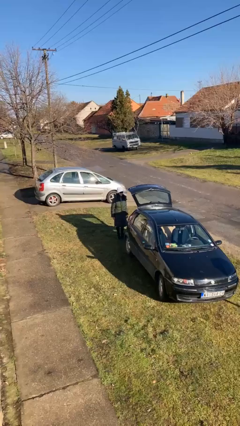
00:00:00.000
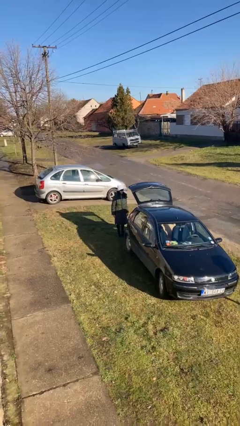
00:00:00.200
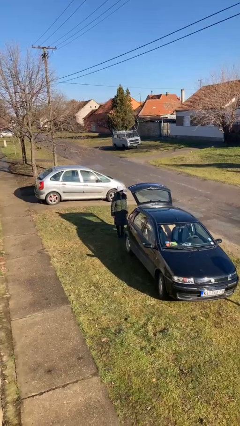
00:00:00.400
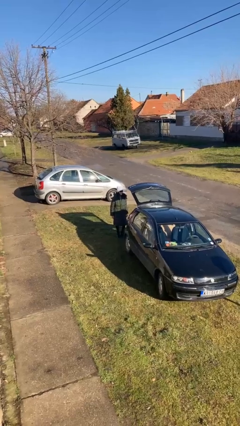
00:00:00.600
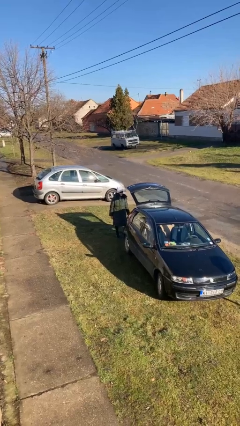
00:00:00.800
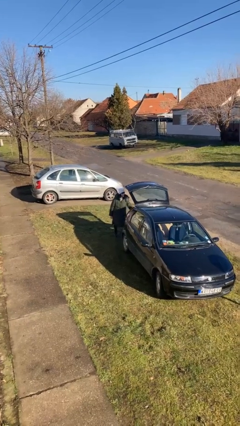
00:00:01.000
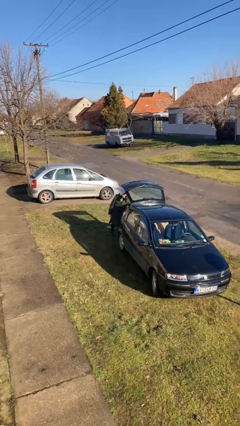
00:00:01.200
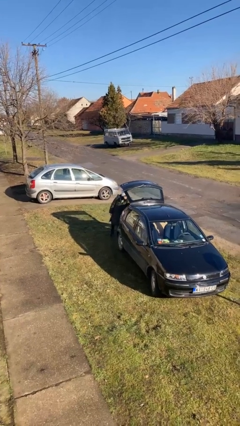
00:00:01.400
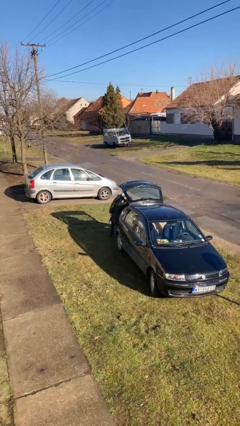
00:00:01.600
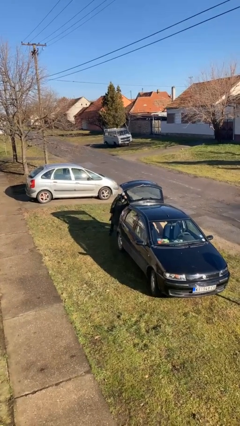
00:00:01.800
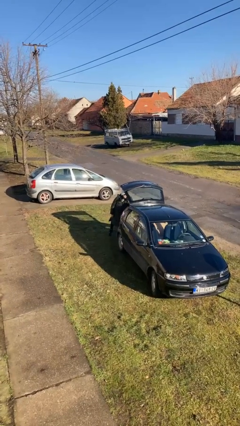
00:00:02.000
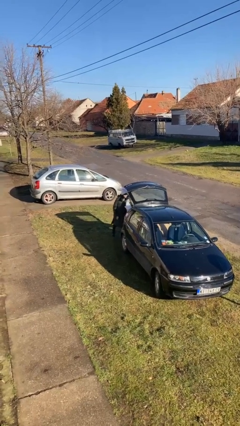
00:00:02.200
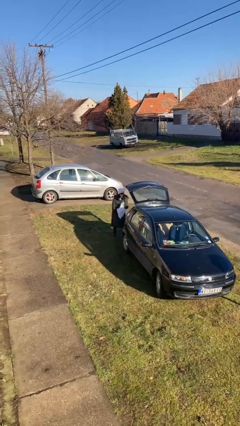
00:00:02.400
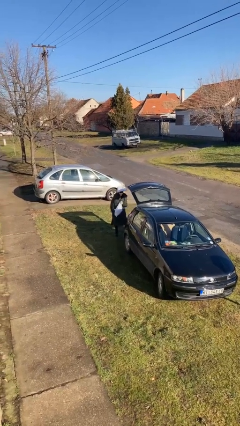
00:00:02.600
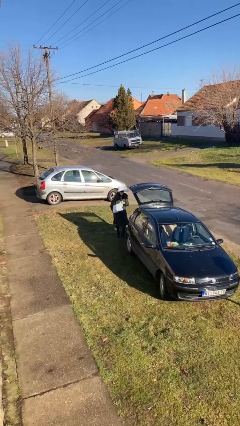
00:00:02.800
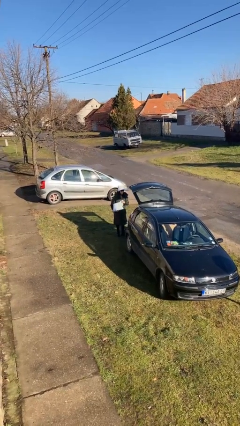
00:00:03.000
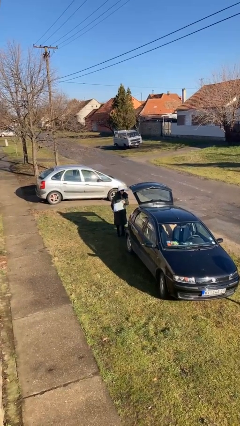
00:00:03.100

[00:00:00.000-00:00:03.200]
person unloads car

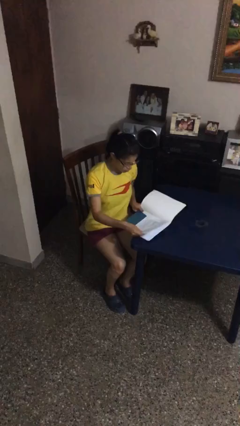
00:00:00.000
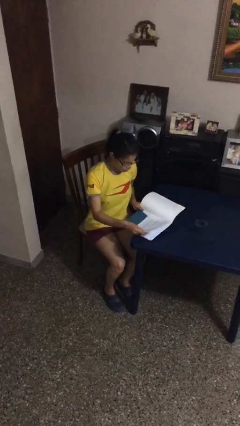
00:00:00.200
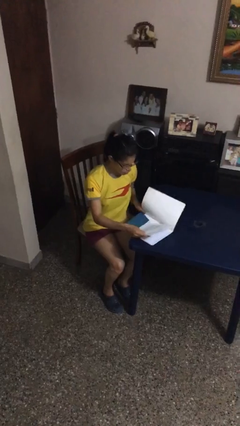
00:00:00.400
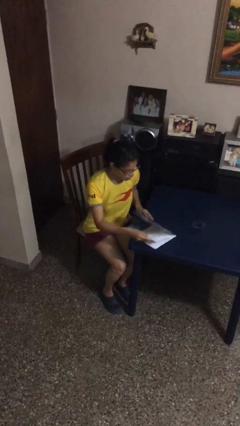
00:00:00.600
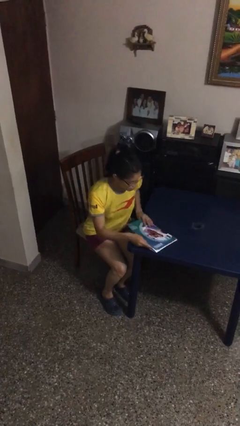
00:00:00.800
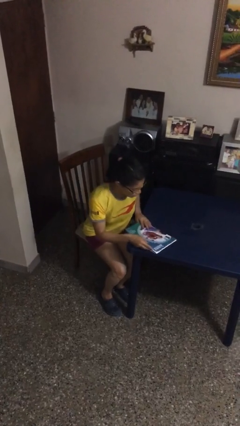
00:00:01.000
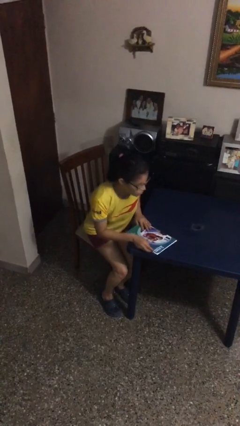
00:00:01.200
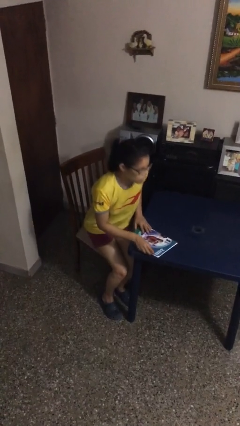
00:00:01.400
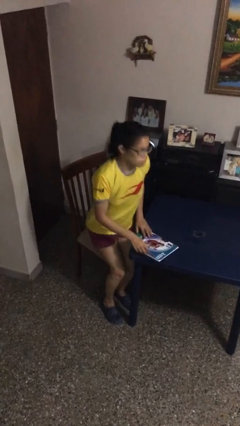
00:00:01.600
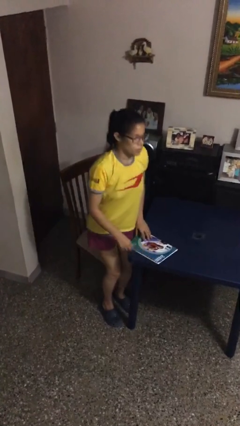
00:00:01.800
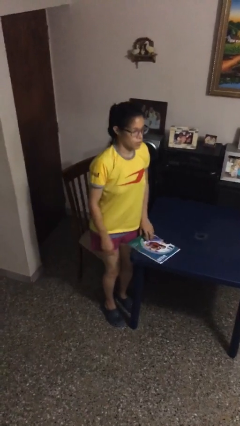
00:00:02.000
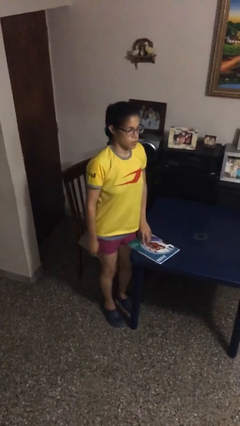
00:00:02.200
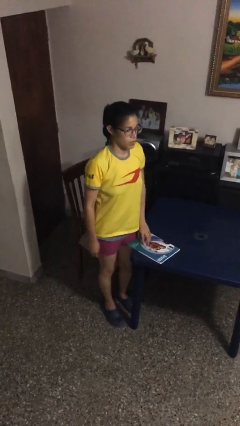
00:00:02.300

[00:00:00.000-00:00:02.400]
person stands up

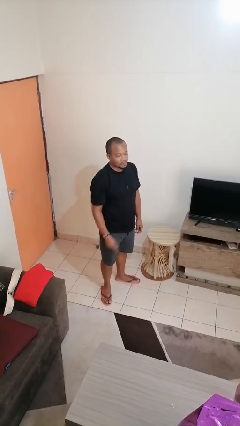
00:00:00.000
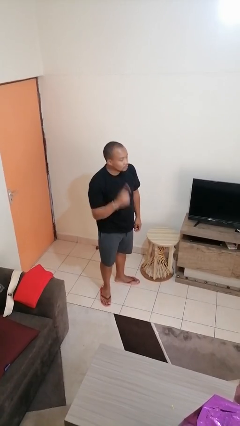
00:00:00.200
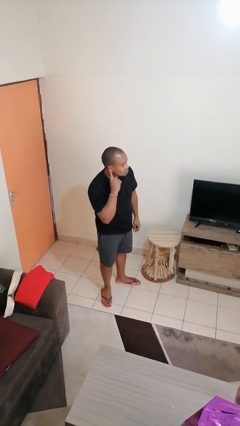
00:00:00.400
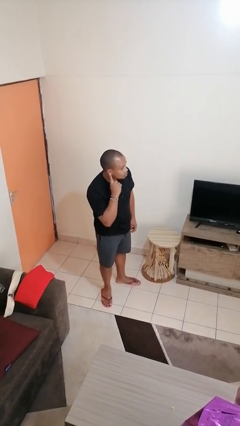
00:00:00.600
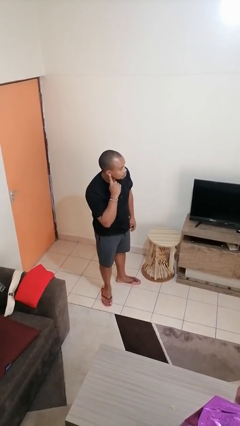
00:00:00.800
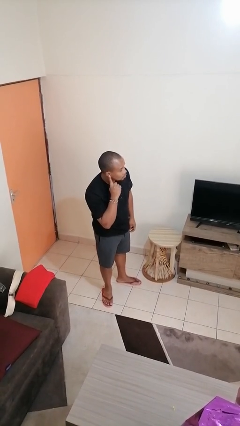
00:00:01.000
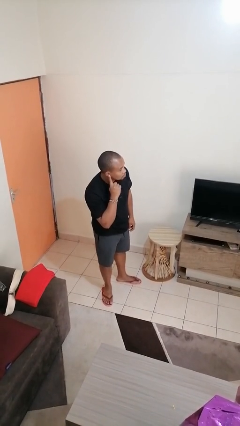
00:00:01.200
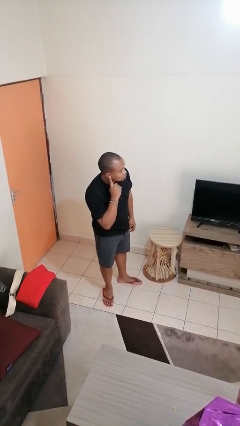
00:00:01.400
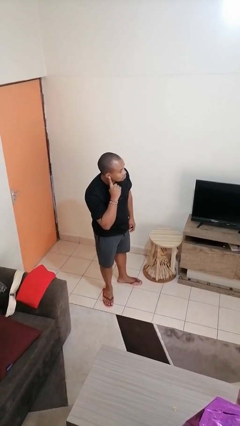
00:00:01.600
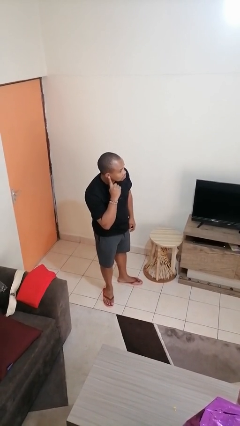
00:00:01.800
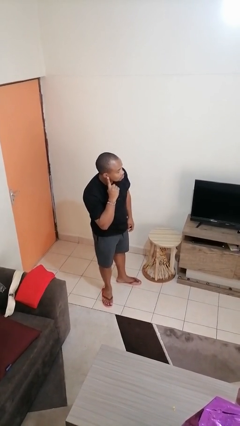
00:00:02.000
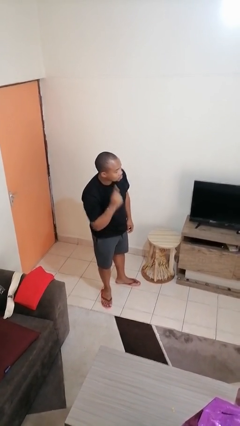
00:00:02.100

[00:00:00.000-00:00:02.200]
person gestures listen closely

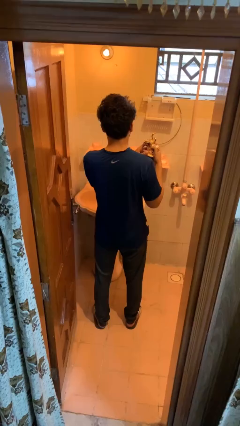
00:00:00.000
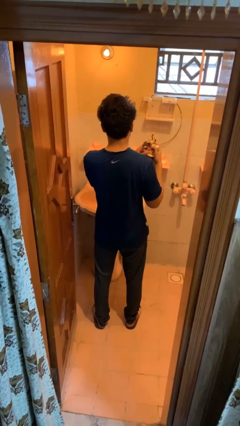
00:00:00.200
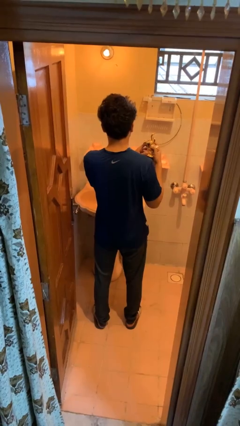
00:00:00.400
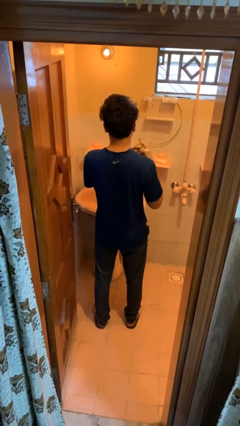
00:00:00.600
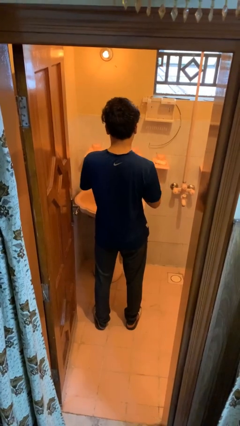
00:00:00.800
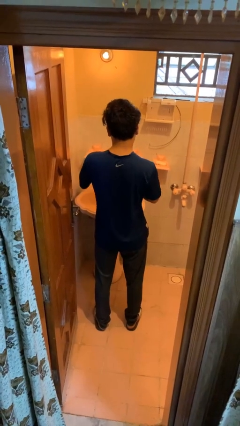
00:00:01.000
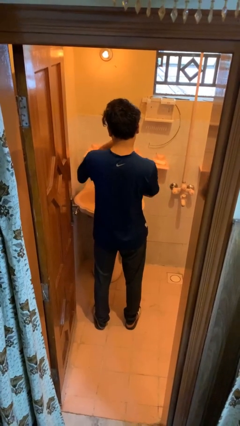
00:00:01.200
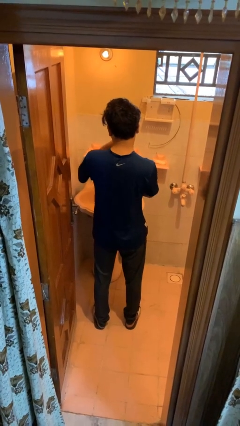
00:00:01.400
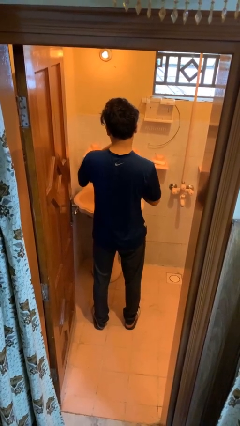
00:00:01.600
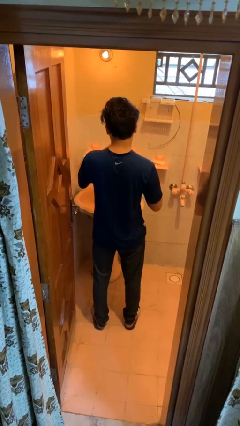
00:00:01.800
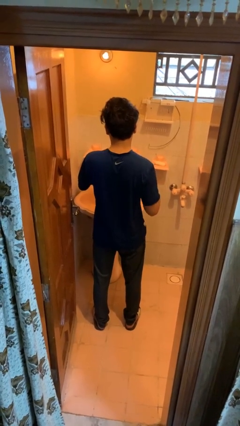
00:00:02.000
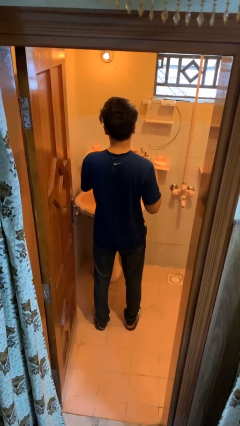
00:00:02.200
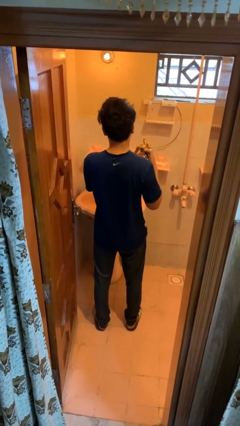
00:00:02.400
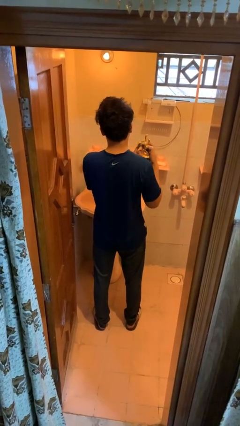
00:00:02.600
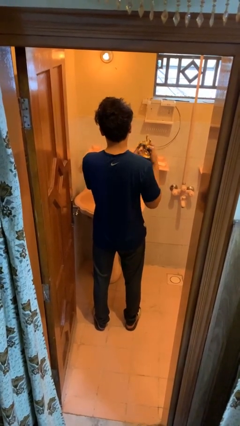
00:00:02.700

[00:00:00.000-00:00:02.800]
person applies deodorant

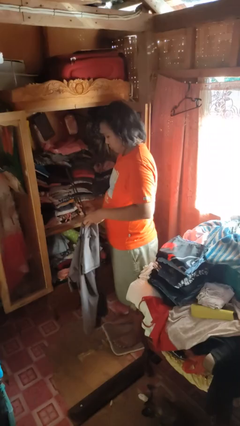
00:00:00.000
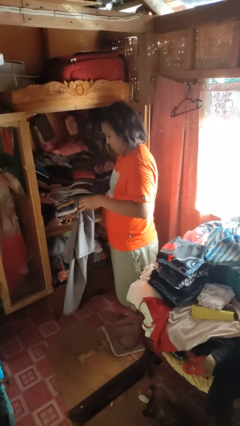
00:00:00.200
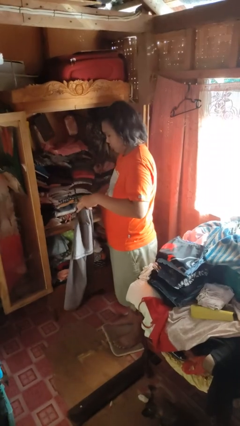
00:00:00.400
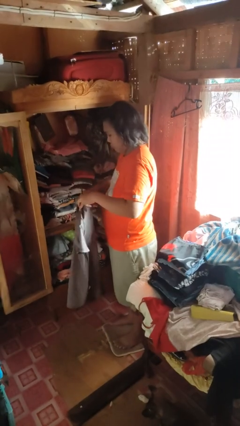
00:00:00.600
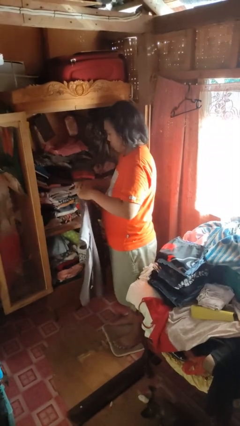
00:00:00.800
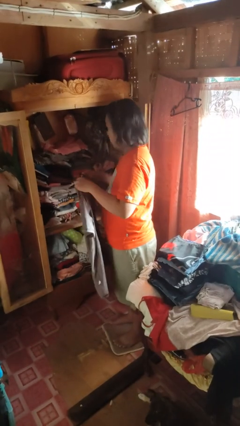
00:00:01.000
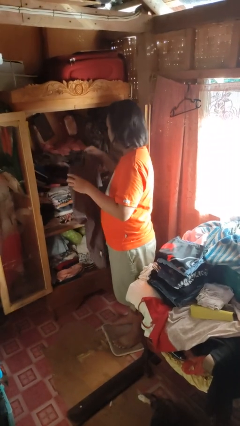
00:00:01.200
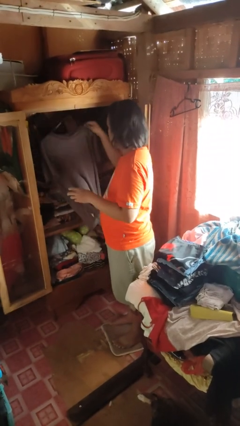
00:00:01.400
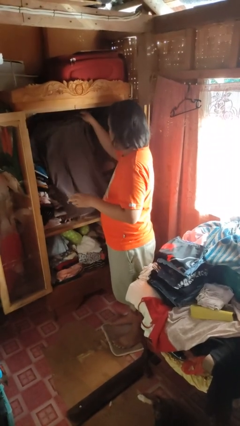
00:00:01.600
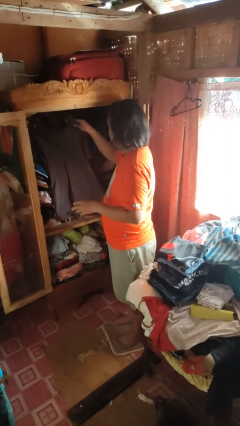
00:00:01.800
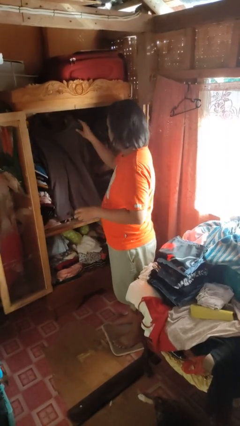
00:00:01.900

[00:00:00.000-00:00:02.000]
person puts clothes into closet

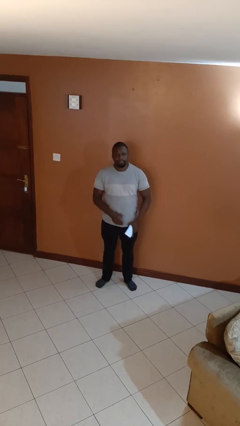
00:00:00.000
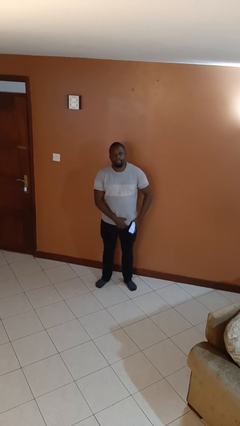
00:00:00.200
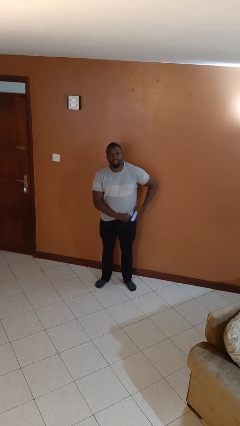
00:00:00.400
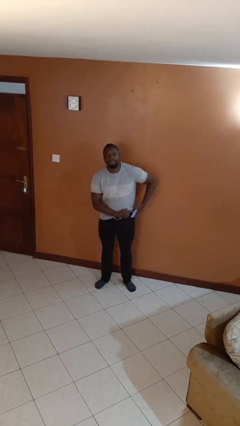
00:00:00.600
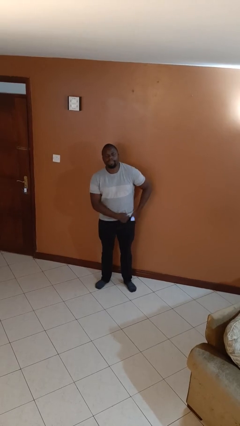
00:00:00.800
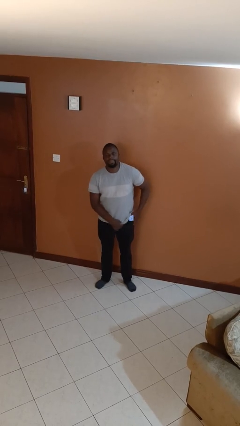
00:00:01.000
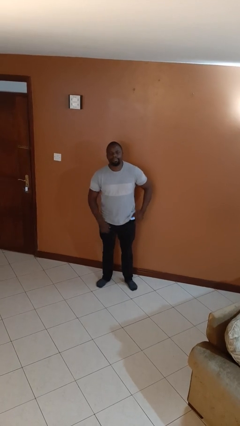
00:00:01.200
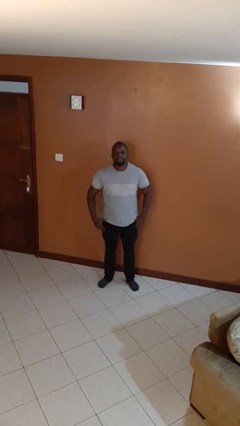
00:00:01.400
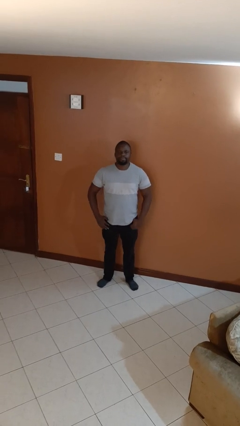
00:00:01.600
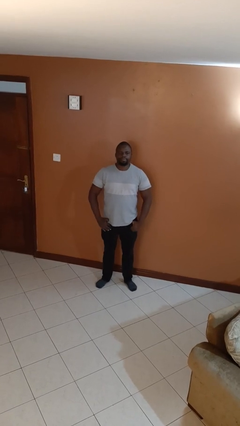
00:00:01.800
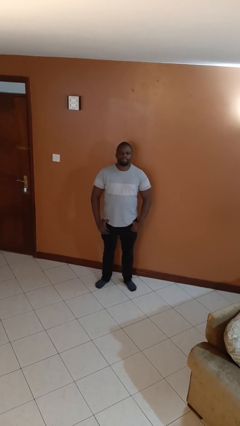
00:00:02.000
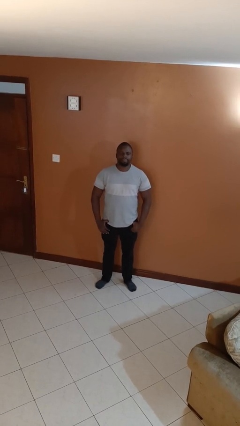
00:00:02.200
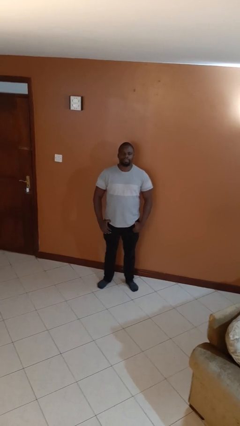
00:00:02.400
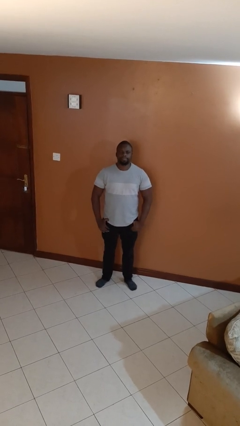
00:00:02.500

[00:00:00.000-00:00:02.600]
person puts phone into pocket

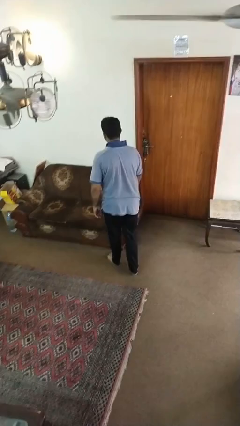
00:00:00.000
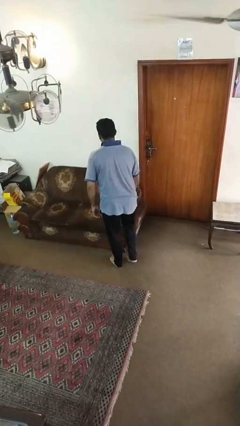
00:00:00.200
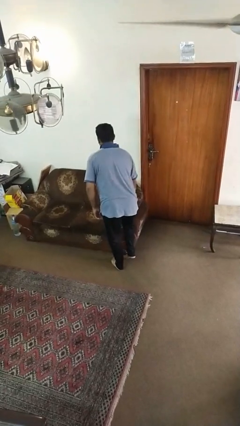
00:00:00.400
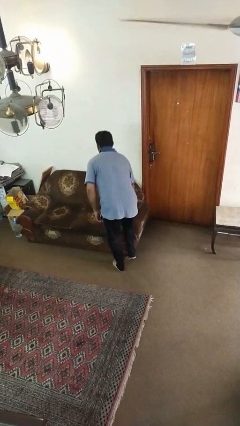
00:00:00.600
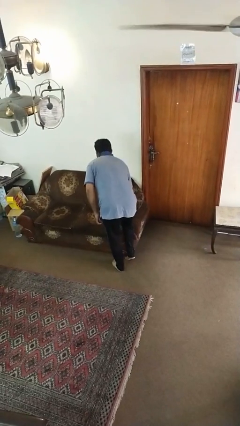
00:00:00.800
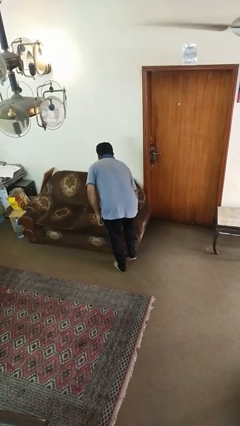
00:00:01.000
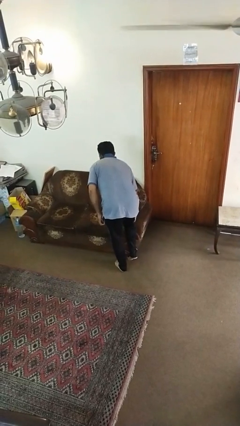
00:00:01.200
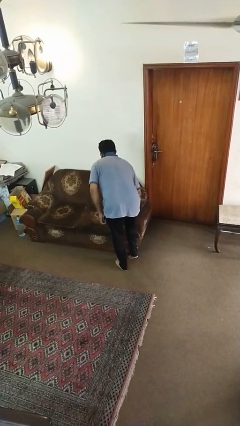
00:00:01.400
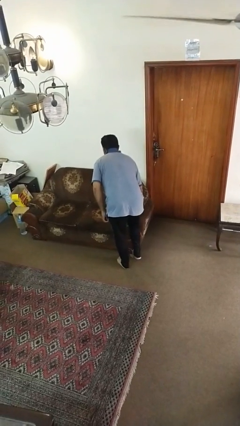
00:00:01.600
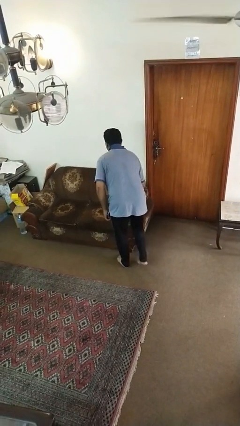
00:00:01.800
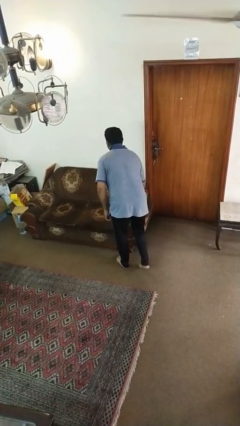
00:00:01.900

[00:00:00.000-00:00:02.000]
person stubs toe
